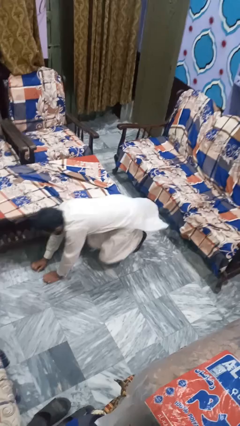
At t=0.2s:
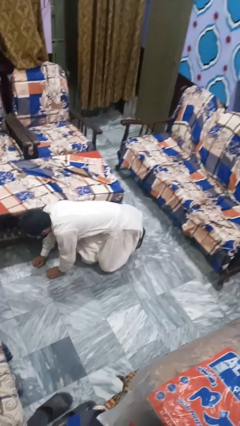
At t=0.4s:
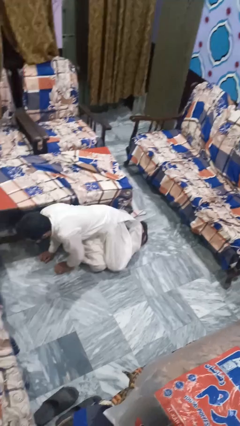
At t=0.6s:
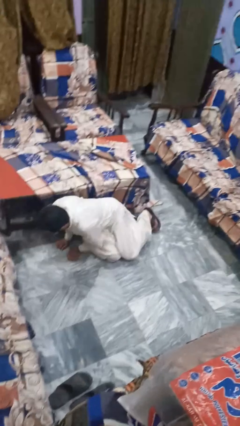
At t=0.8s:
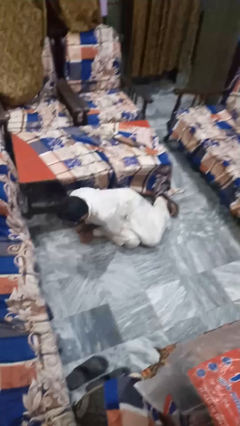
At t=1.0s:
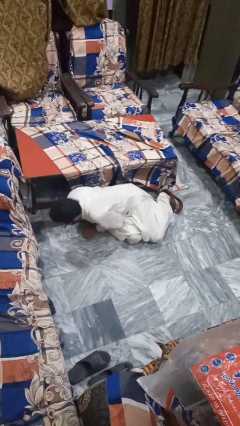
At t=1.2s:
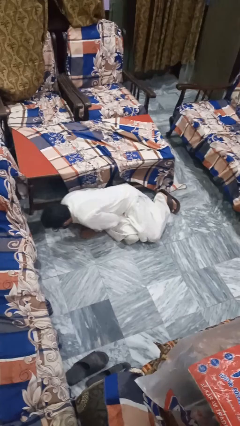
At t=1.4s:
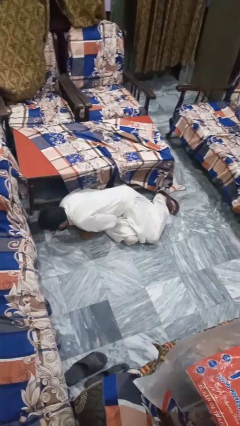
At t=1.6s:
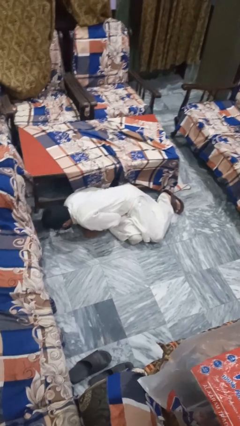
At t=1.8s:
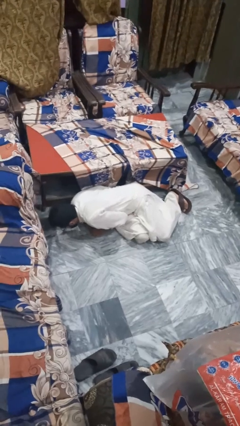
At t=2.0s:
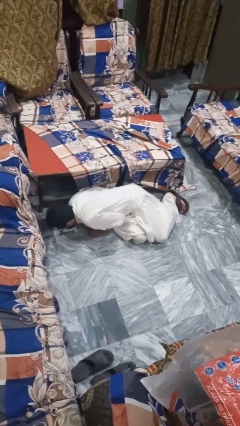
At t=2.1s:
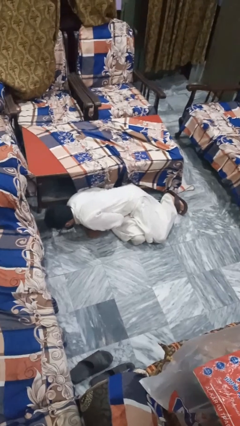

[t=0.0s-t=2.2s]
person lies down on floor

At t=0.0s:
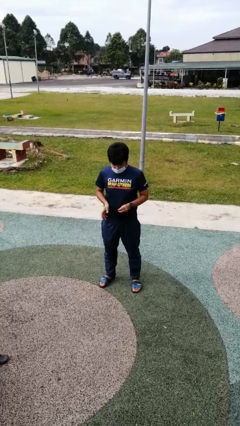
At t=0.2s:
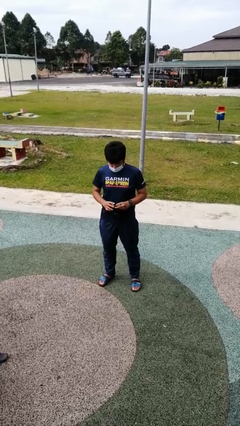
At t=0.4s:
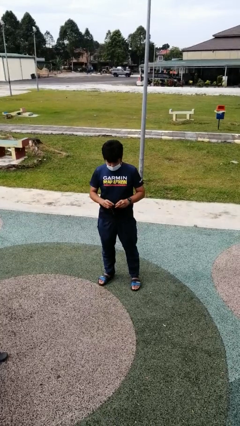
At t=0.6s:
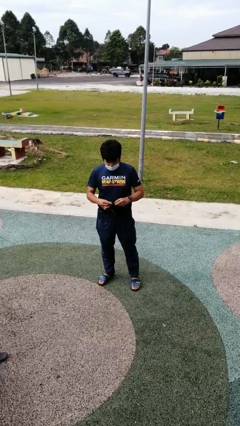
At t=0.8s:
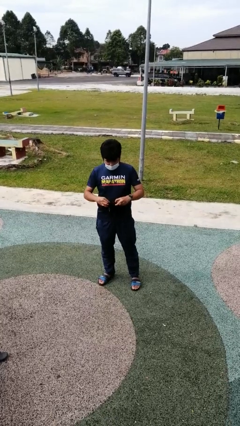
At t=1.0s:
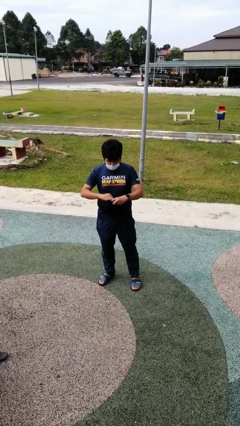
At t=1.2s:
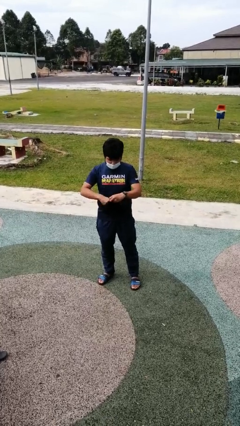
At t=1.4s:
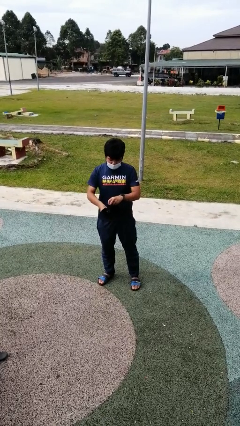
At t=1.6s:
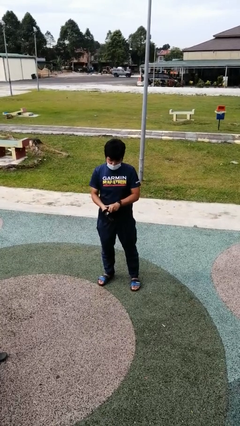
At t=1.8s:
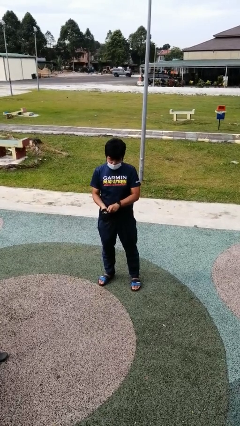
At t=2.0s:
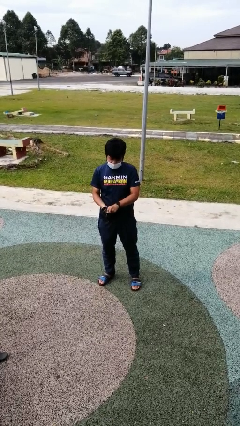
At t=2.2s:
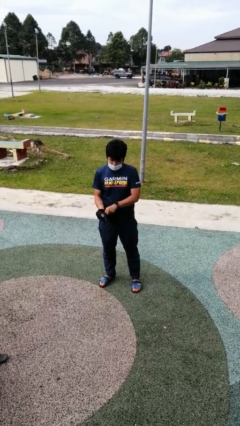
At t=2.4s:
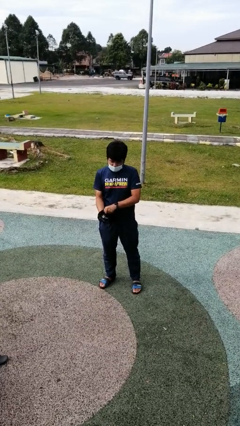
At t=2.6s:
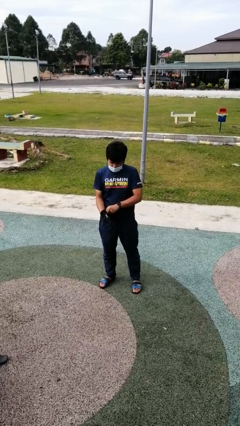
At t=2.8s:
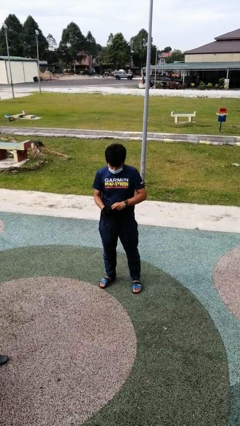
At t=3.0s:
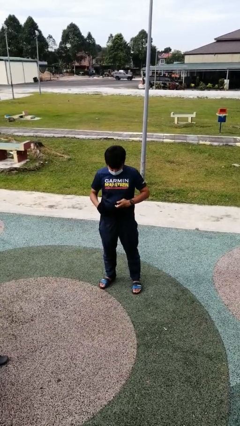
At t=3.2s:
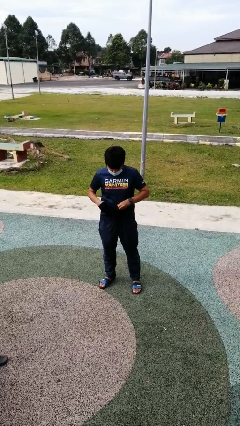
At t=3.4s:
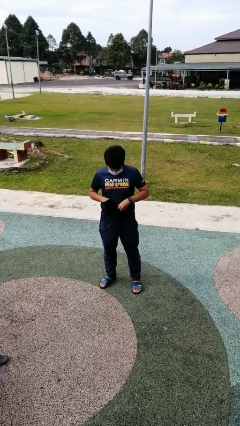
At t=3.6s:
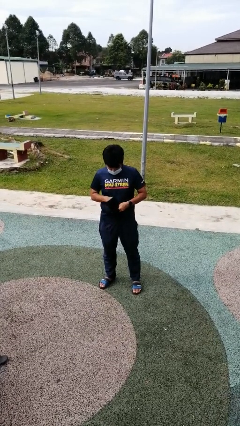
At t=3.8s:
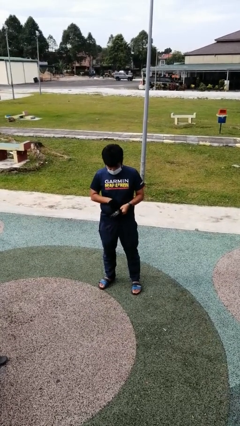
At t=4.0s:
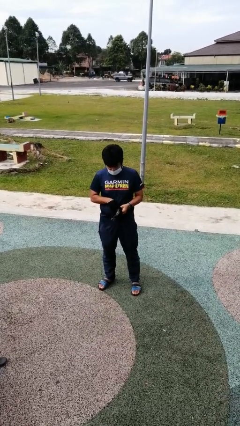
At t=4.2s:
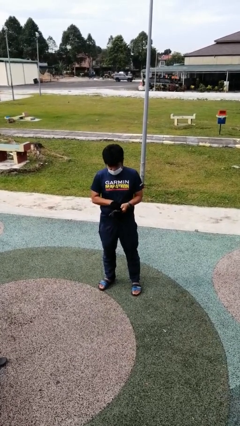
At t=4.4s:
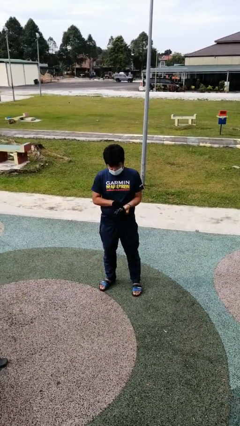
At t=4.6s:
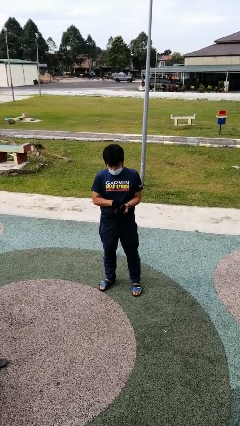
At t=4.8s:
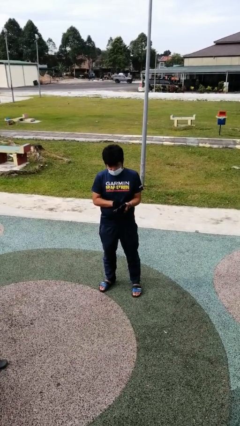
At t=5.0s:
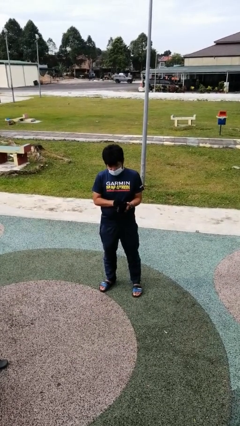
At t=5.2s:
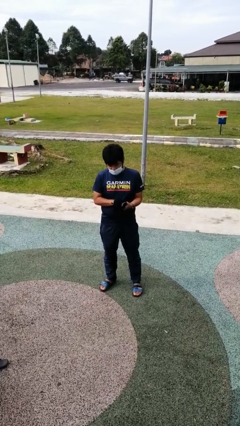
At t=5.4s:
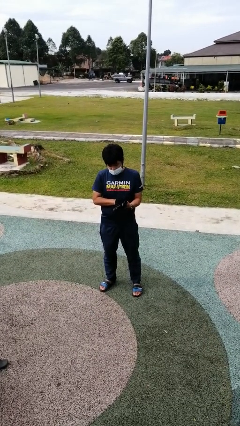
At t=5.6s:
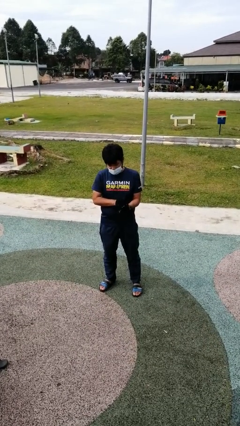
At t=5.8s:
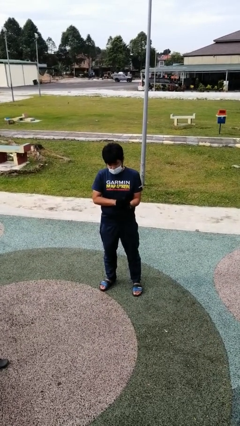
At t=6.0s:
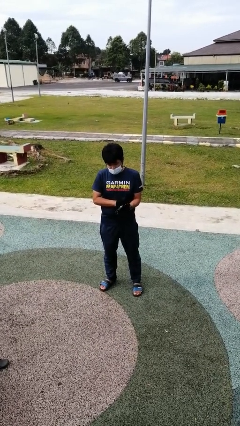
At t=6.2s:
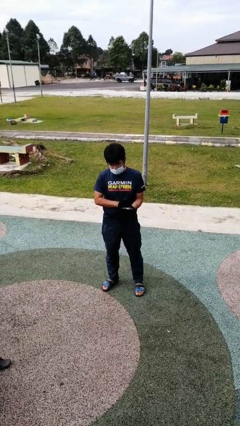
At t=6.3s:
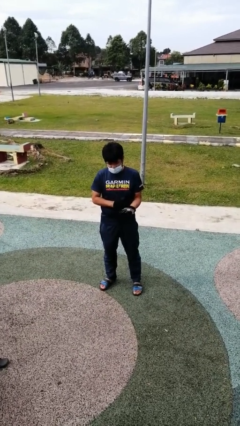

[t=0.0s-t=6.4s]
person puts on gloves

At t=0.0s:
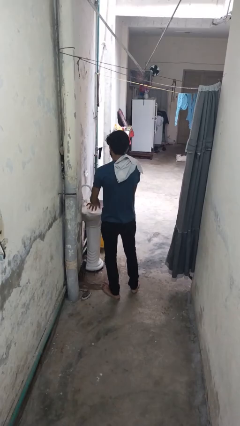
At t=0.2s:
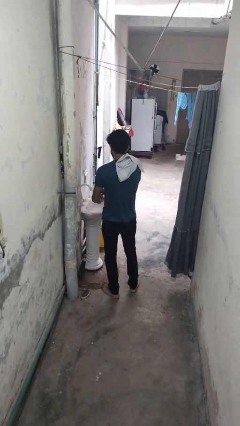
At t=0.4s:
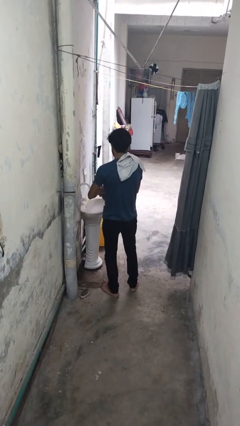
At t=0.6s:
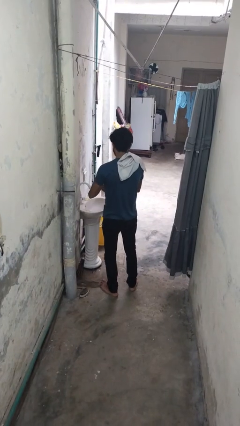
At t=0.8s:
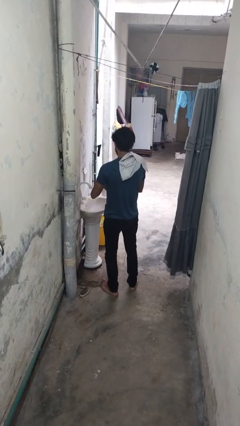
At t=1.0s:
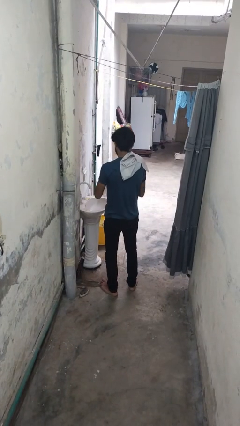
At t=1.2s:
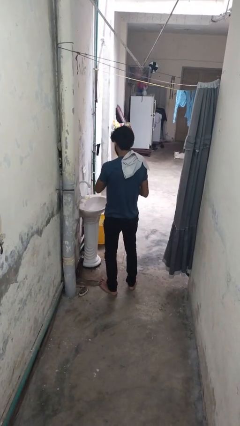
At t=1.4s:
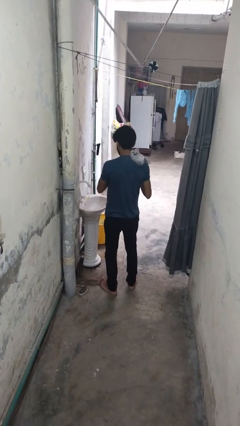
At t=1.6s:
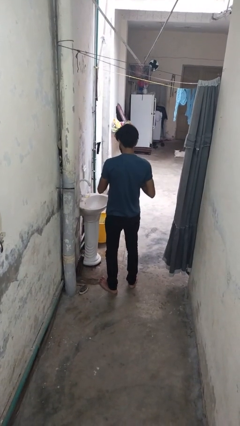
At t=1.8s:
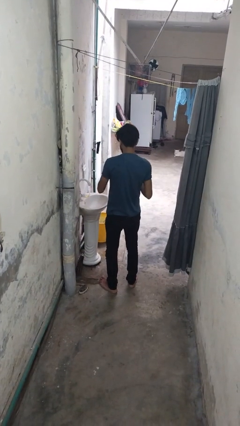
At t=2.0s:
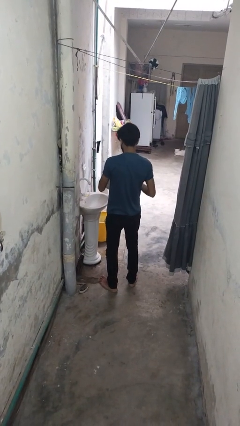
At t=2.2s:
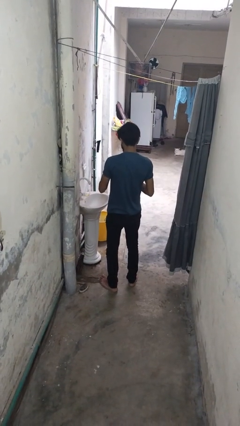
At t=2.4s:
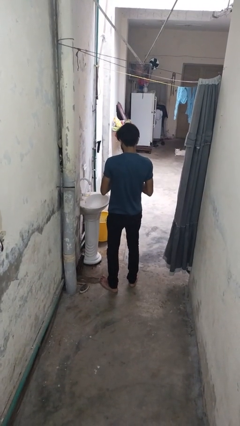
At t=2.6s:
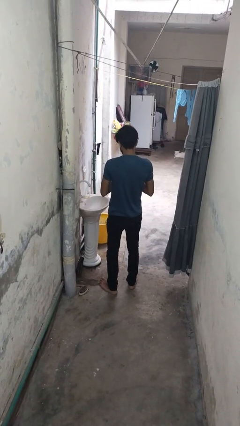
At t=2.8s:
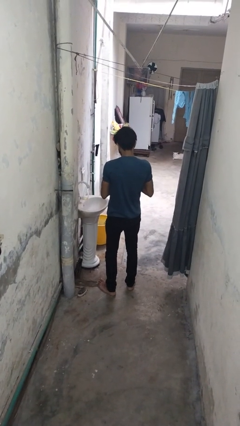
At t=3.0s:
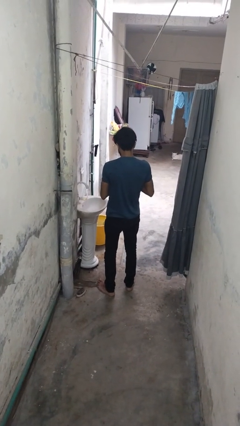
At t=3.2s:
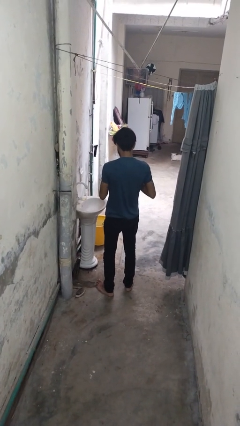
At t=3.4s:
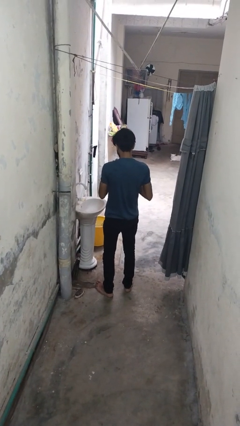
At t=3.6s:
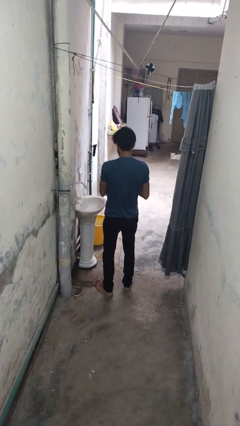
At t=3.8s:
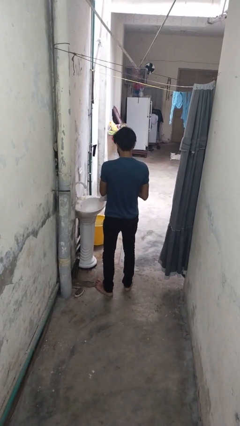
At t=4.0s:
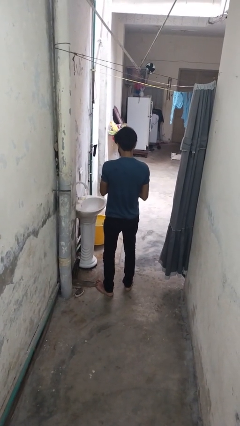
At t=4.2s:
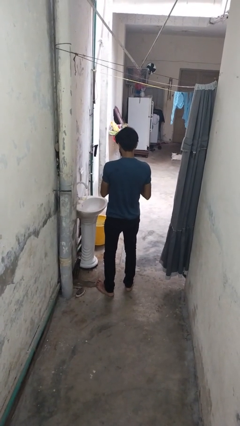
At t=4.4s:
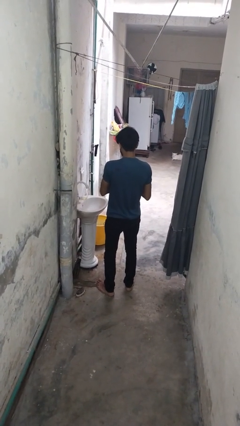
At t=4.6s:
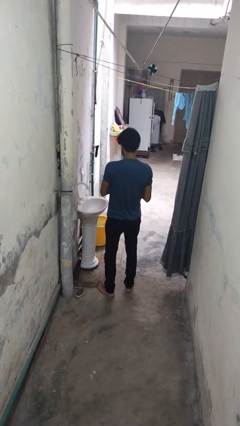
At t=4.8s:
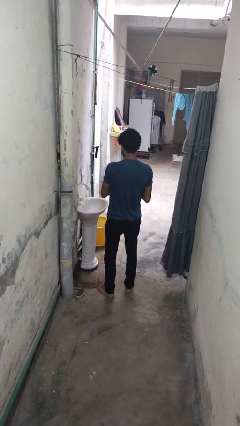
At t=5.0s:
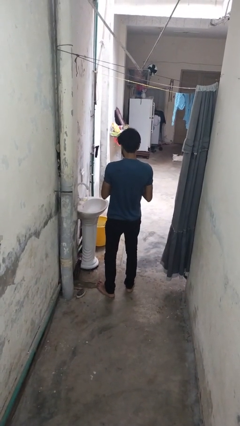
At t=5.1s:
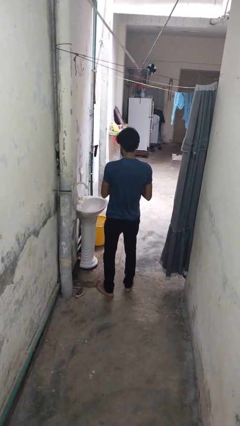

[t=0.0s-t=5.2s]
person dries hands with towel

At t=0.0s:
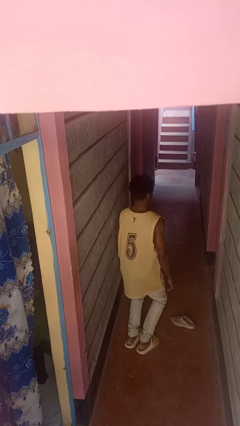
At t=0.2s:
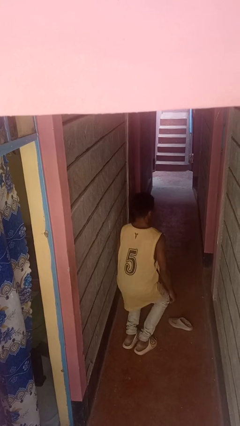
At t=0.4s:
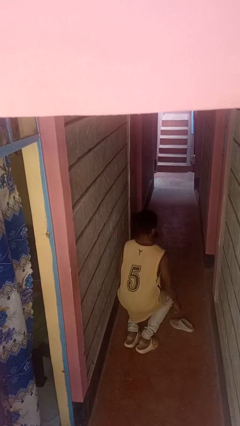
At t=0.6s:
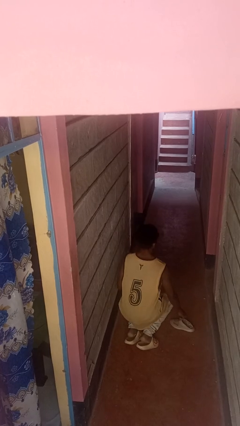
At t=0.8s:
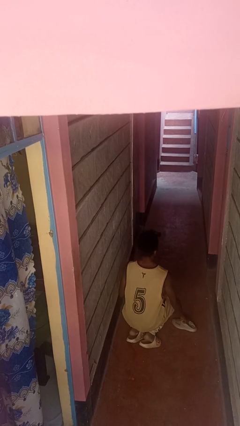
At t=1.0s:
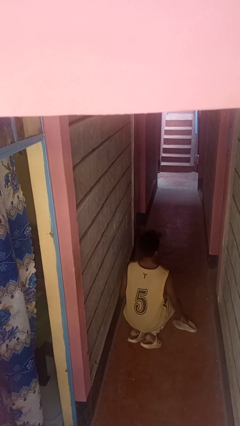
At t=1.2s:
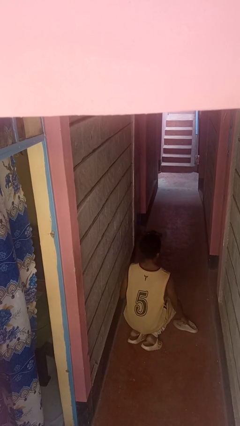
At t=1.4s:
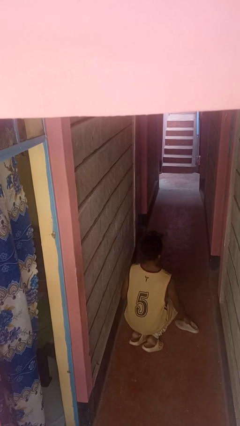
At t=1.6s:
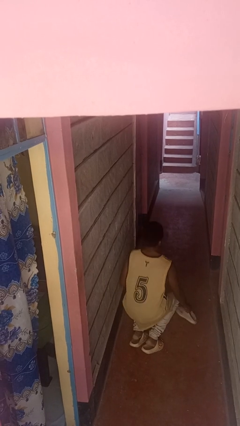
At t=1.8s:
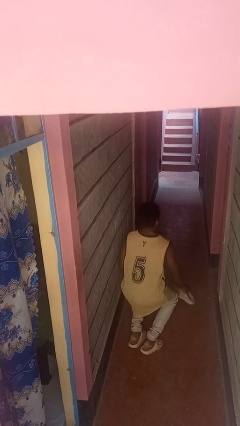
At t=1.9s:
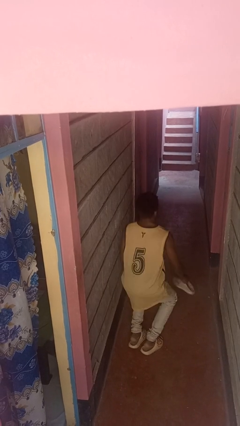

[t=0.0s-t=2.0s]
person picks up object from floor

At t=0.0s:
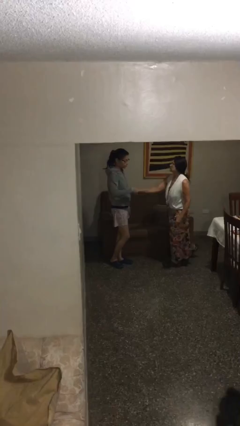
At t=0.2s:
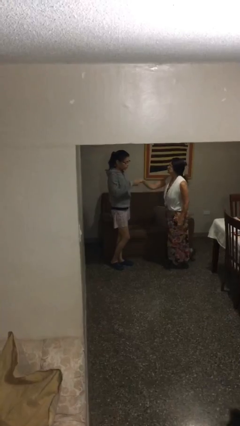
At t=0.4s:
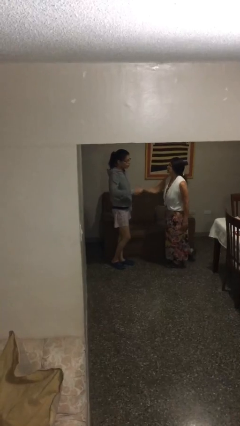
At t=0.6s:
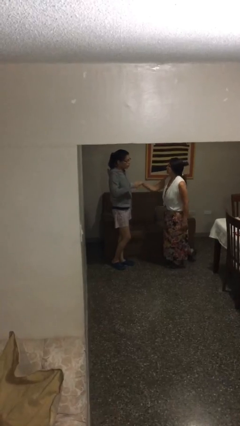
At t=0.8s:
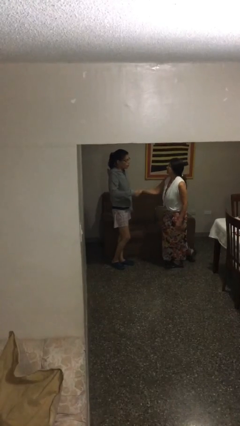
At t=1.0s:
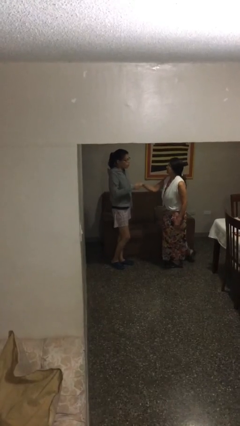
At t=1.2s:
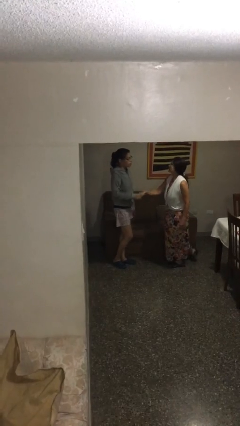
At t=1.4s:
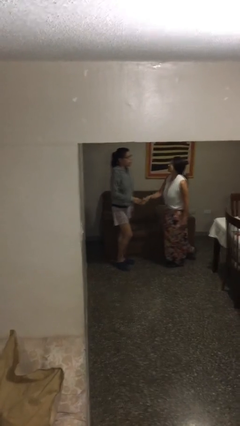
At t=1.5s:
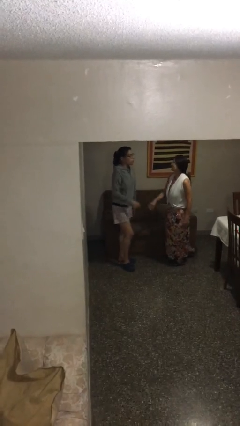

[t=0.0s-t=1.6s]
person shakes hand
